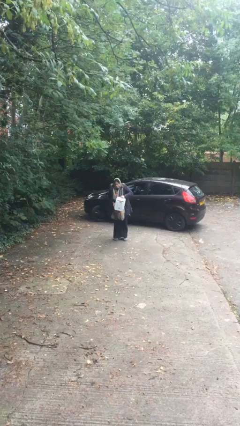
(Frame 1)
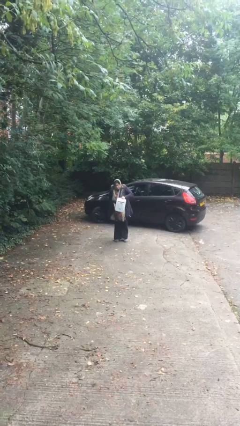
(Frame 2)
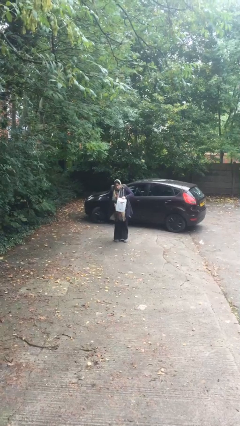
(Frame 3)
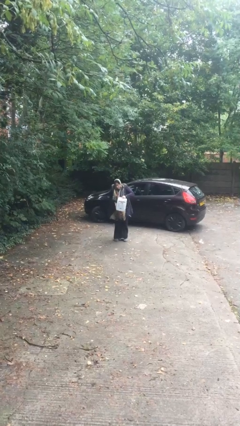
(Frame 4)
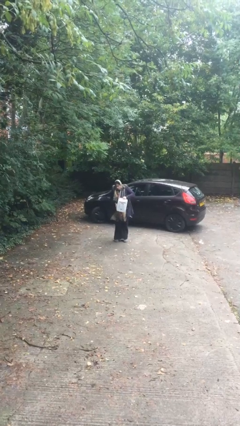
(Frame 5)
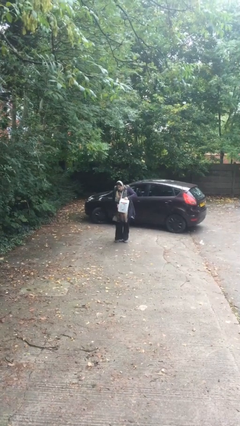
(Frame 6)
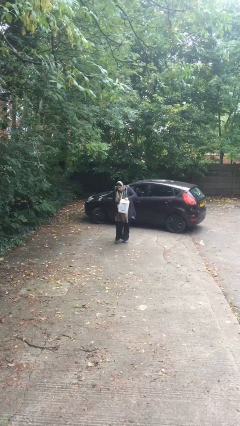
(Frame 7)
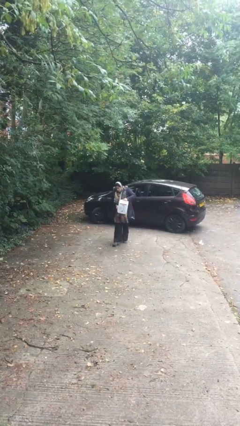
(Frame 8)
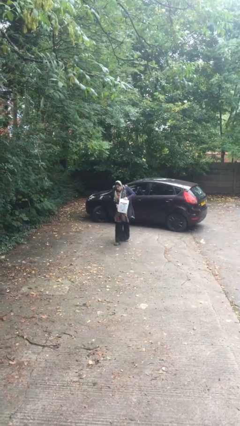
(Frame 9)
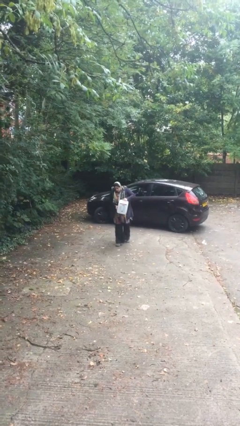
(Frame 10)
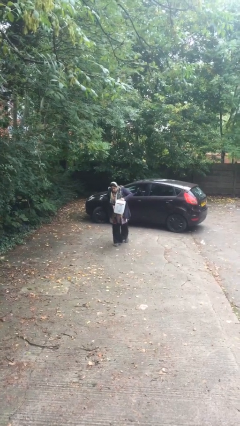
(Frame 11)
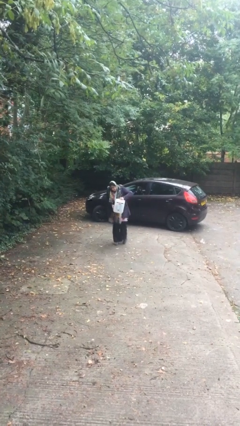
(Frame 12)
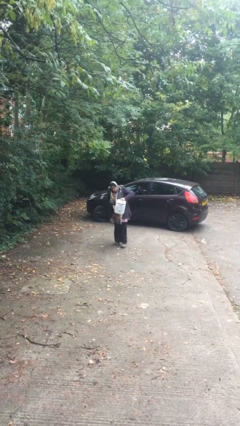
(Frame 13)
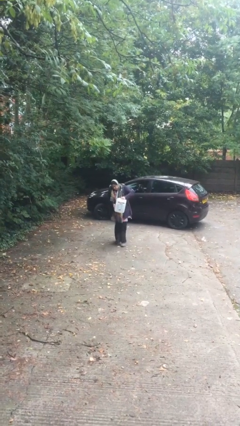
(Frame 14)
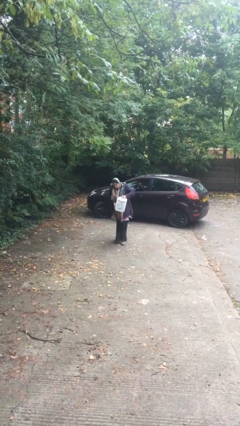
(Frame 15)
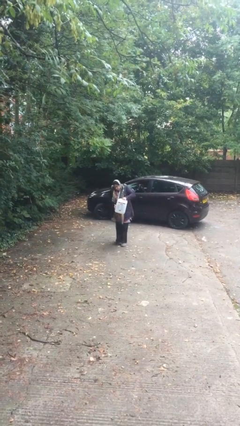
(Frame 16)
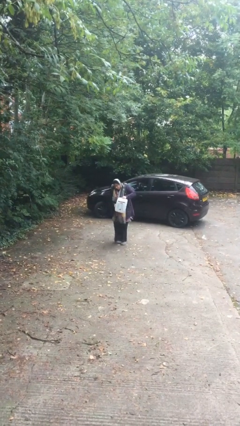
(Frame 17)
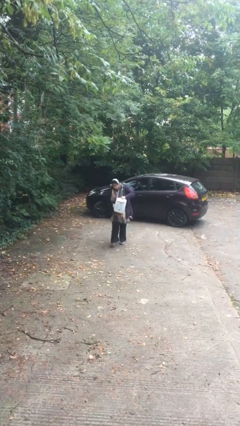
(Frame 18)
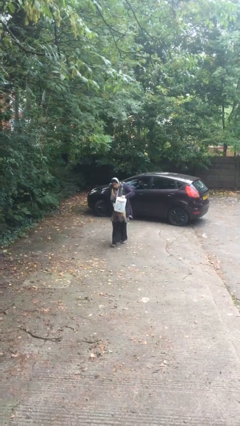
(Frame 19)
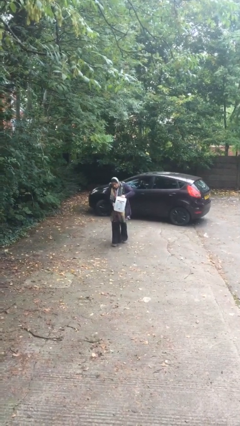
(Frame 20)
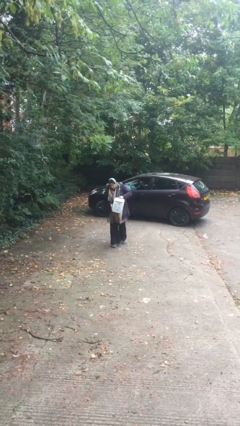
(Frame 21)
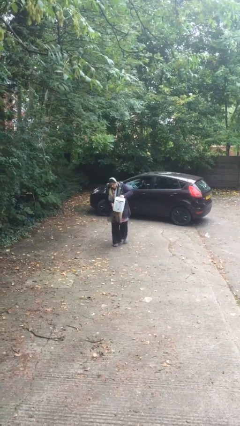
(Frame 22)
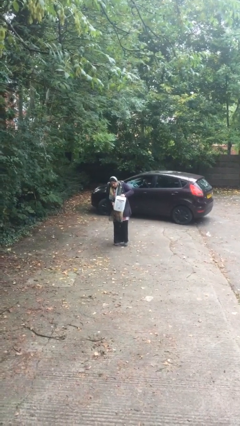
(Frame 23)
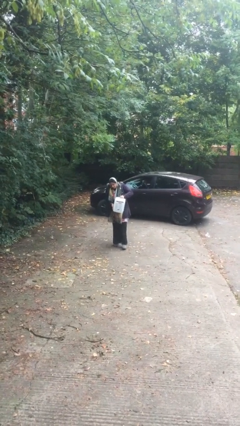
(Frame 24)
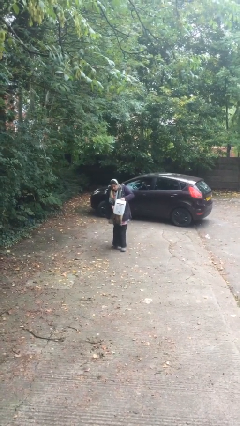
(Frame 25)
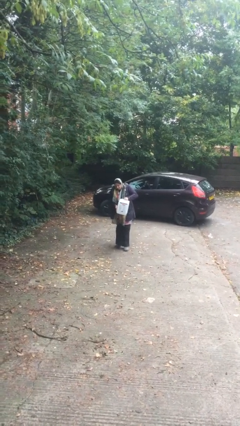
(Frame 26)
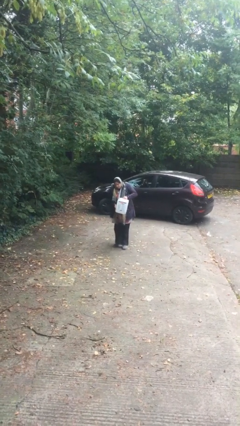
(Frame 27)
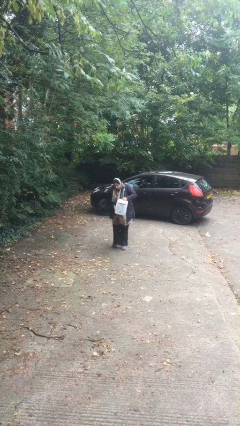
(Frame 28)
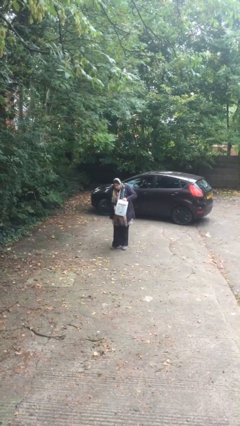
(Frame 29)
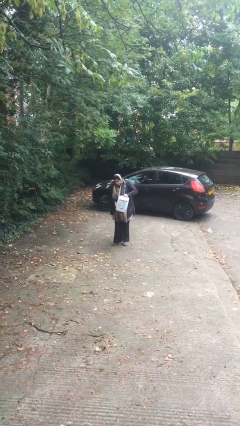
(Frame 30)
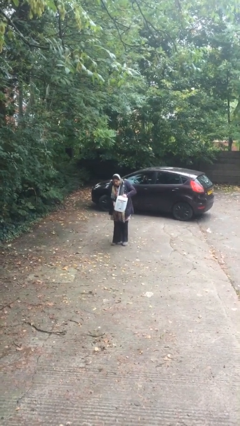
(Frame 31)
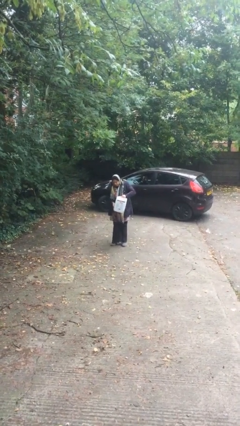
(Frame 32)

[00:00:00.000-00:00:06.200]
person carries heavy object

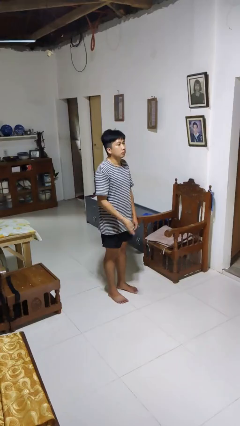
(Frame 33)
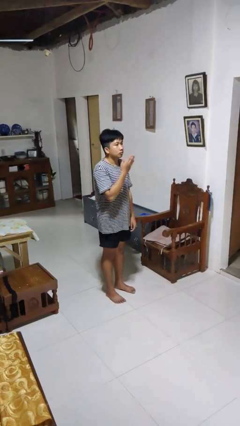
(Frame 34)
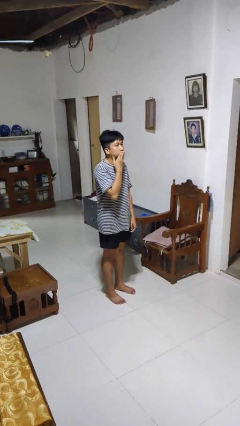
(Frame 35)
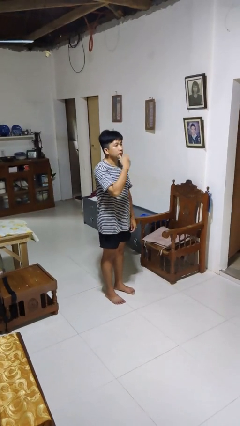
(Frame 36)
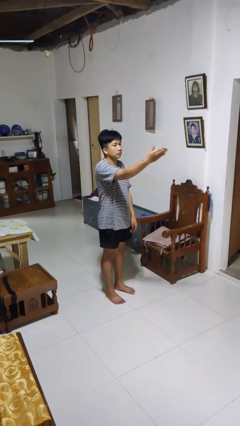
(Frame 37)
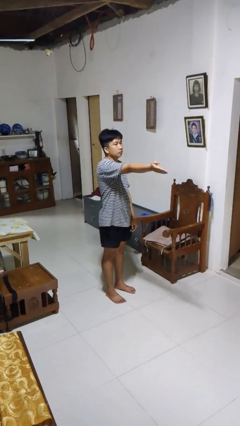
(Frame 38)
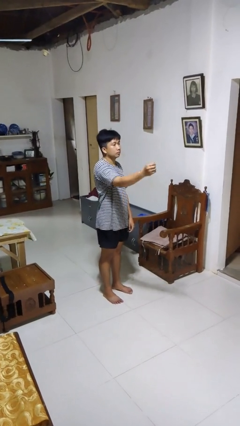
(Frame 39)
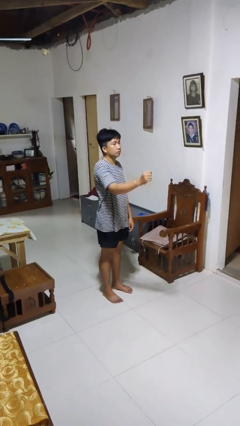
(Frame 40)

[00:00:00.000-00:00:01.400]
person gestures blow kiss

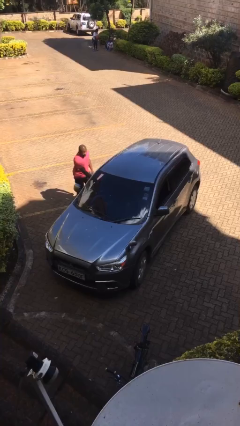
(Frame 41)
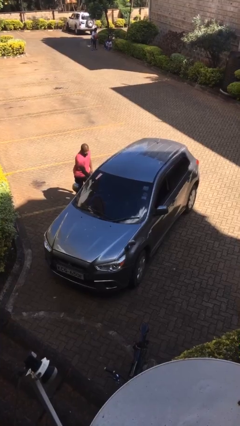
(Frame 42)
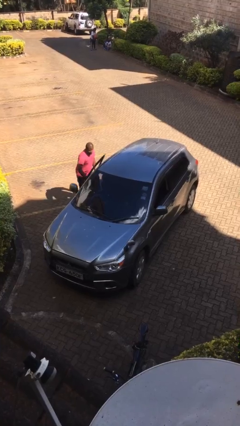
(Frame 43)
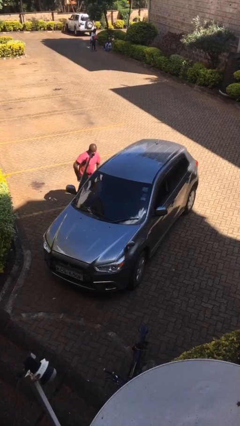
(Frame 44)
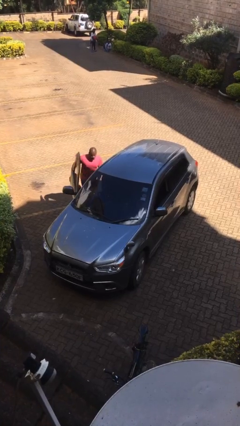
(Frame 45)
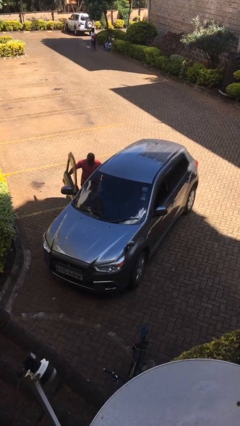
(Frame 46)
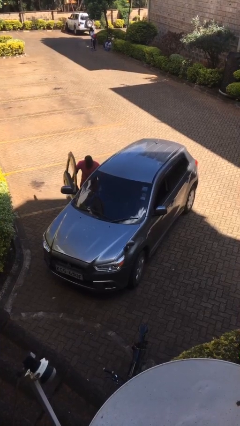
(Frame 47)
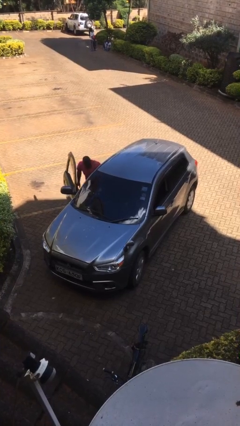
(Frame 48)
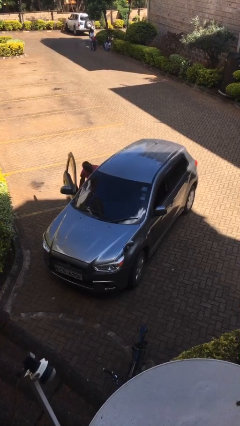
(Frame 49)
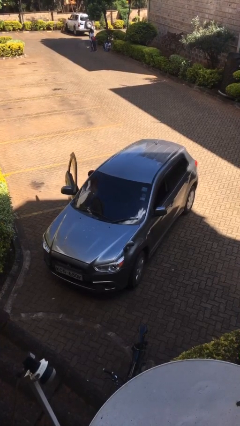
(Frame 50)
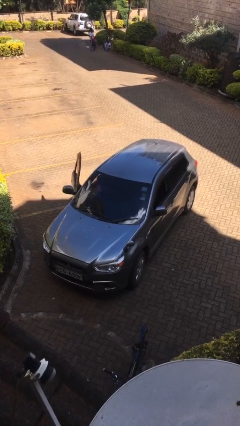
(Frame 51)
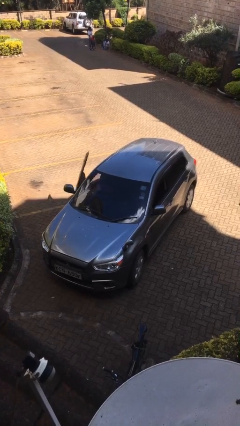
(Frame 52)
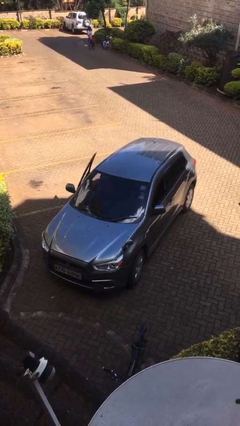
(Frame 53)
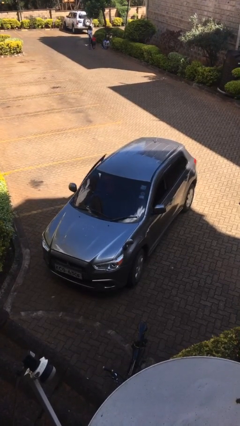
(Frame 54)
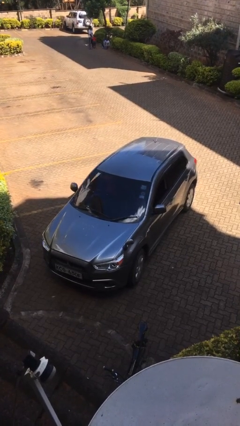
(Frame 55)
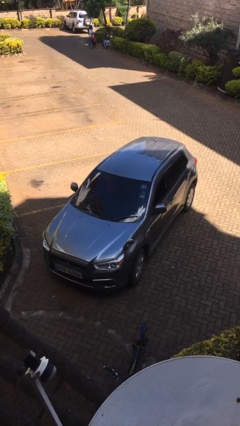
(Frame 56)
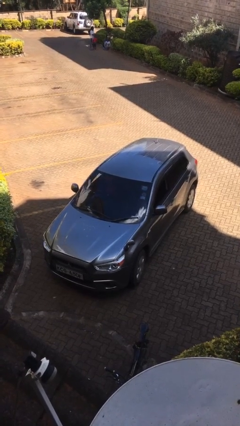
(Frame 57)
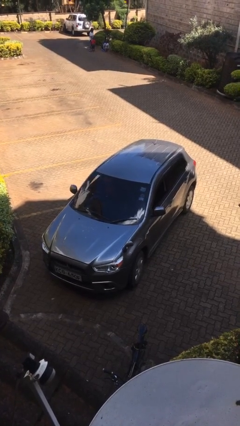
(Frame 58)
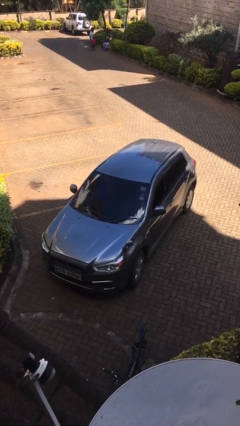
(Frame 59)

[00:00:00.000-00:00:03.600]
car picks up person

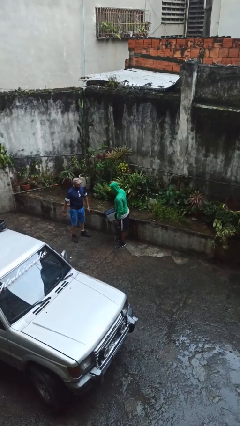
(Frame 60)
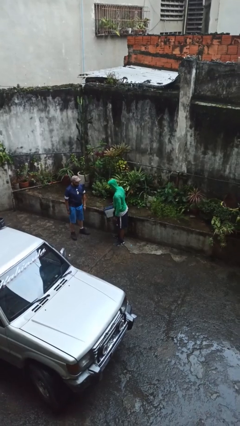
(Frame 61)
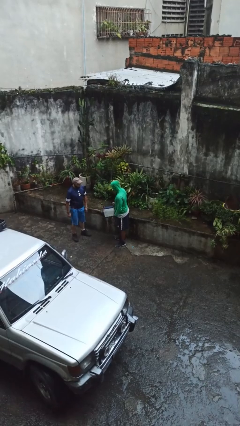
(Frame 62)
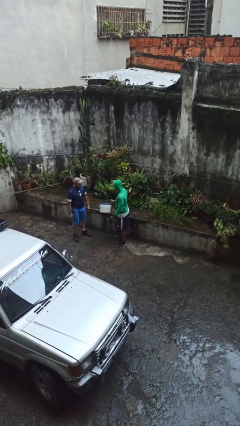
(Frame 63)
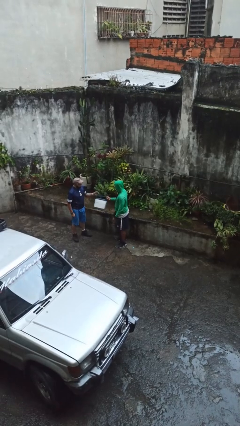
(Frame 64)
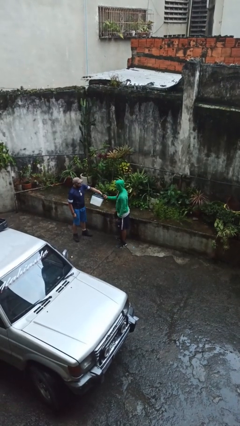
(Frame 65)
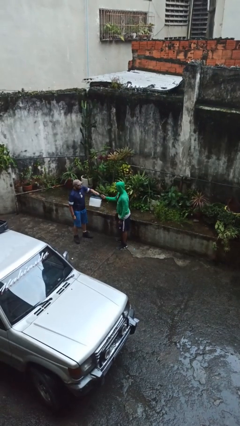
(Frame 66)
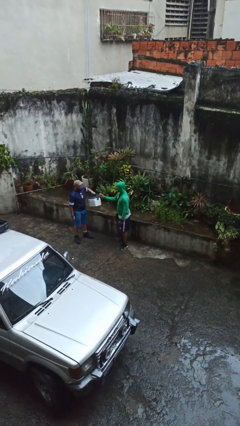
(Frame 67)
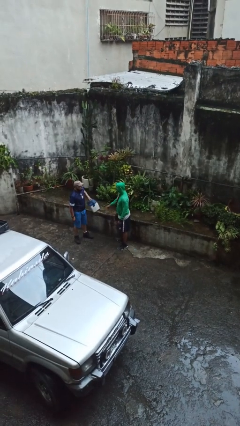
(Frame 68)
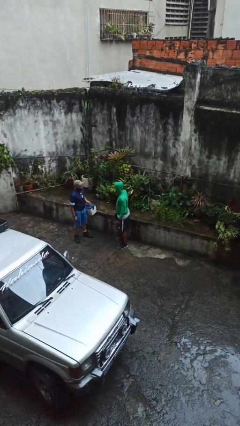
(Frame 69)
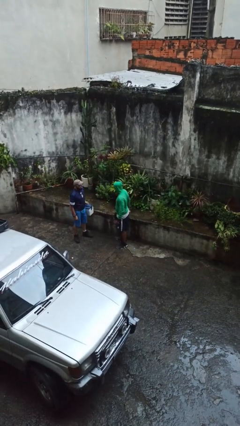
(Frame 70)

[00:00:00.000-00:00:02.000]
person transfers object to person

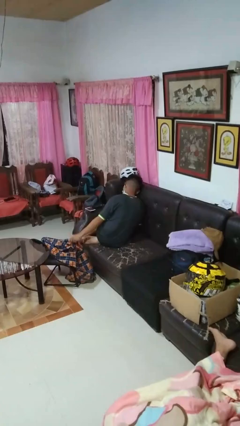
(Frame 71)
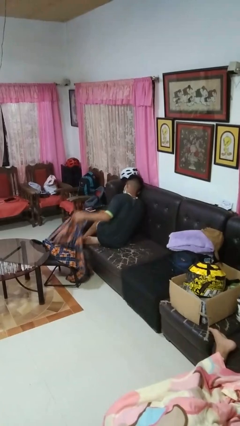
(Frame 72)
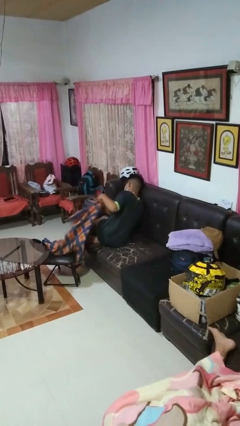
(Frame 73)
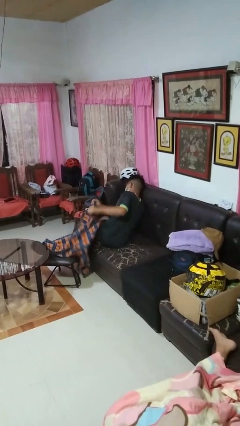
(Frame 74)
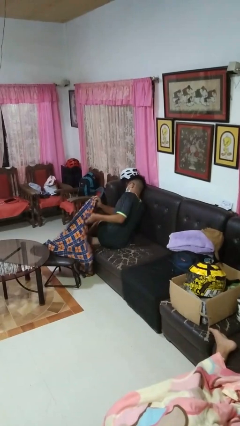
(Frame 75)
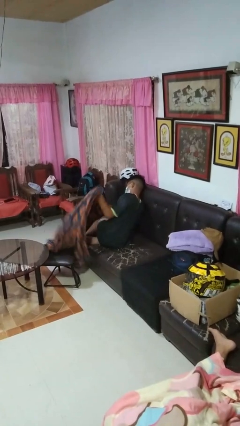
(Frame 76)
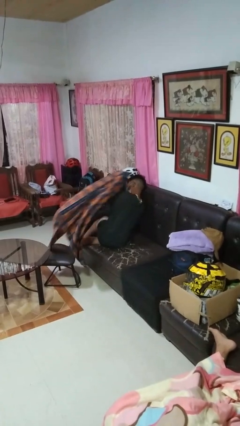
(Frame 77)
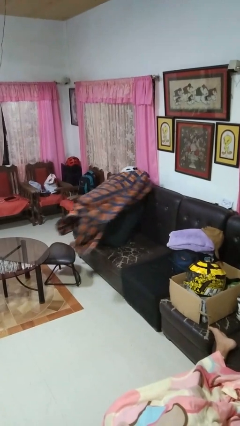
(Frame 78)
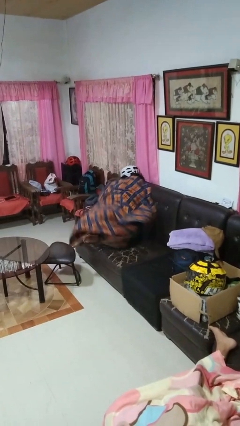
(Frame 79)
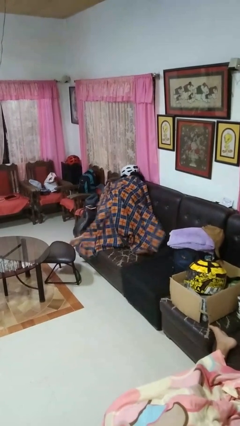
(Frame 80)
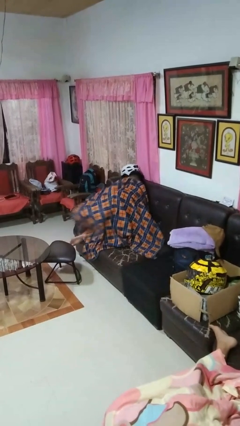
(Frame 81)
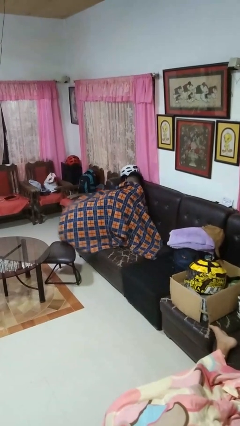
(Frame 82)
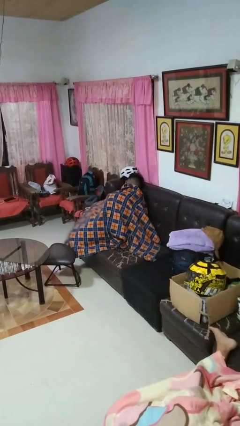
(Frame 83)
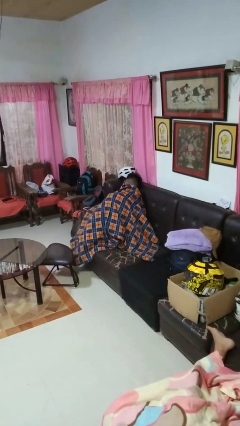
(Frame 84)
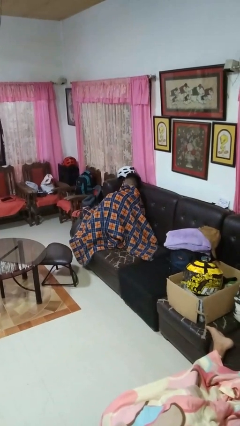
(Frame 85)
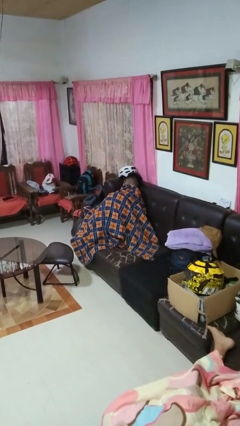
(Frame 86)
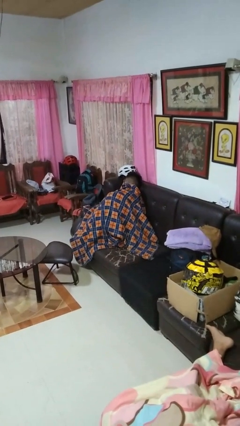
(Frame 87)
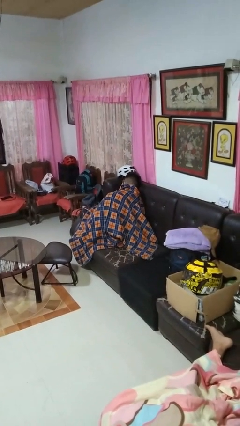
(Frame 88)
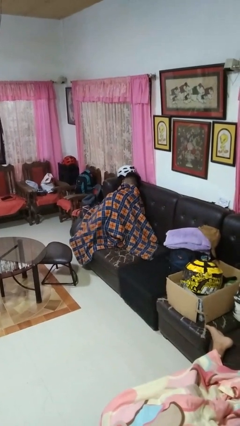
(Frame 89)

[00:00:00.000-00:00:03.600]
person covers with blanket

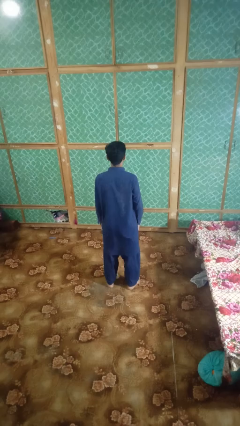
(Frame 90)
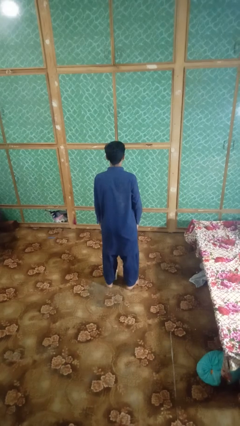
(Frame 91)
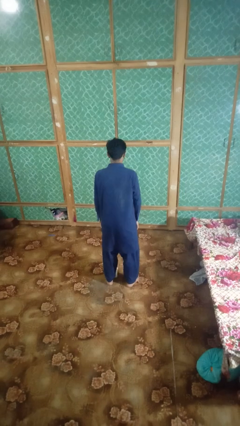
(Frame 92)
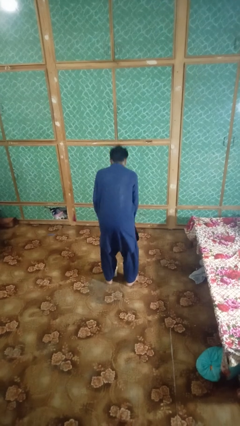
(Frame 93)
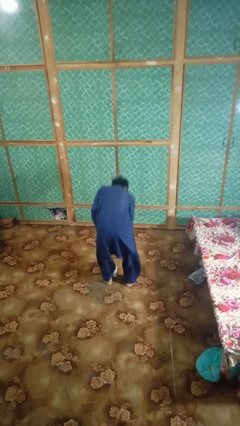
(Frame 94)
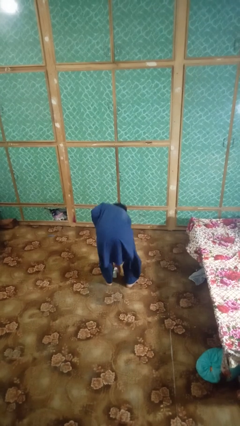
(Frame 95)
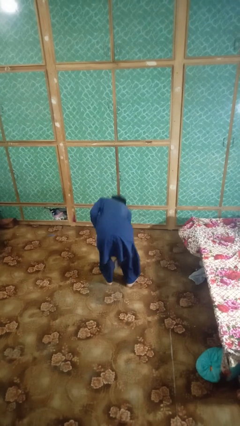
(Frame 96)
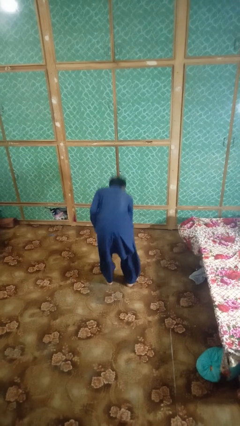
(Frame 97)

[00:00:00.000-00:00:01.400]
person picks up object from floor
